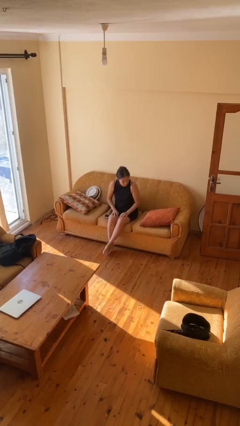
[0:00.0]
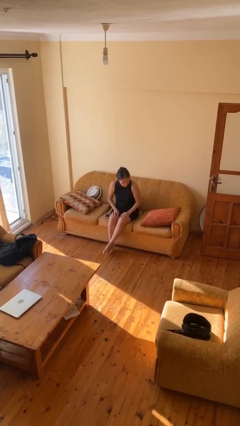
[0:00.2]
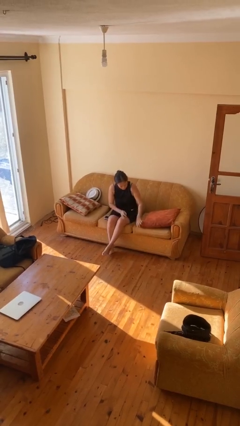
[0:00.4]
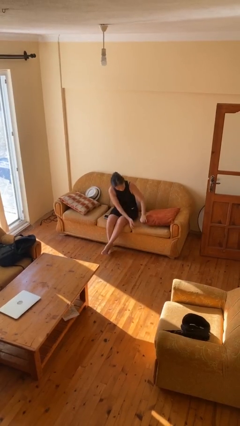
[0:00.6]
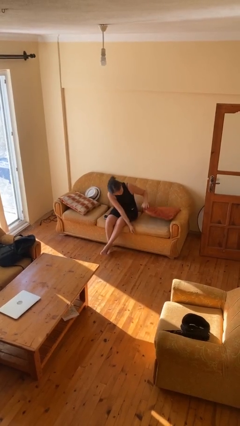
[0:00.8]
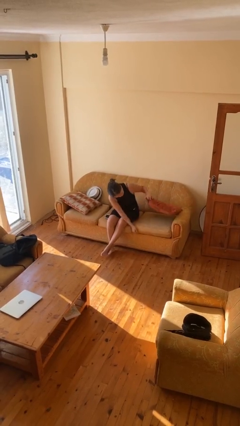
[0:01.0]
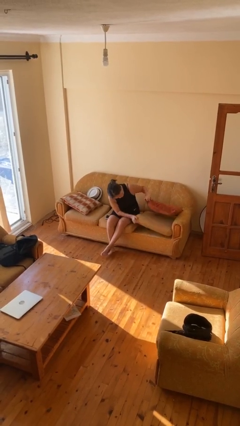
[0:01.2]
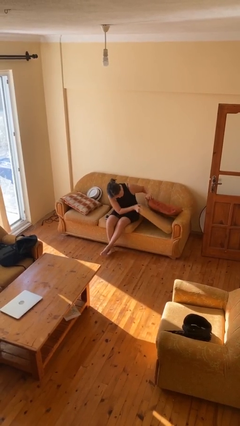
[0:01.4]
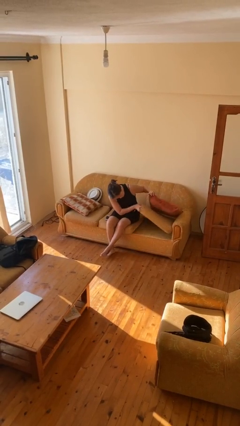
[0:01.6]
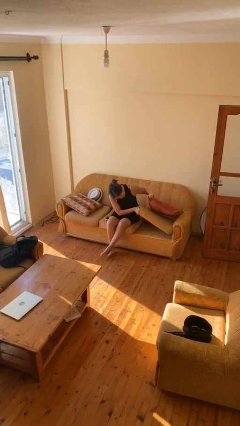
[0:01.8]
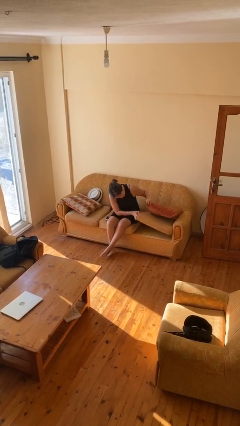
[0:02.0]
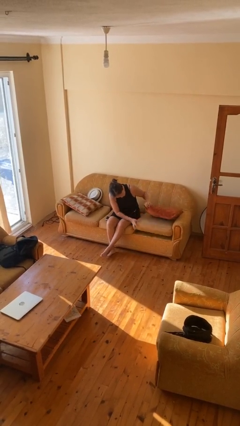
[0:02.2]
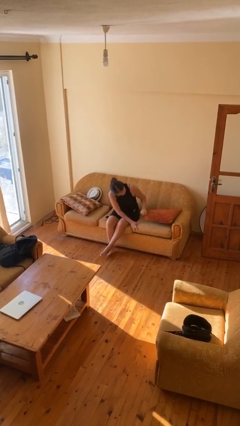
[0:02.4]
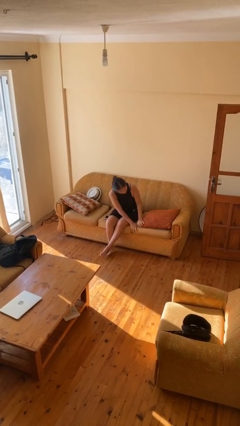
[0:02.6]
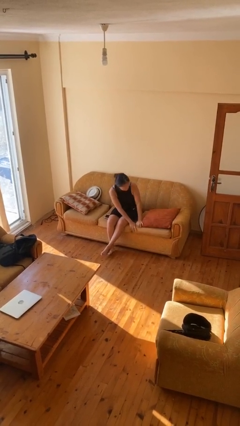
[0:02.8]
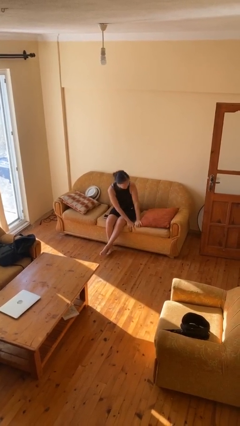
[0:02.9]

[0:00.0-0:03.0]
person searches in couch

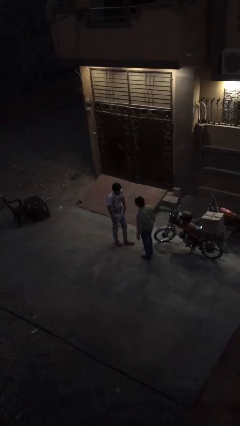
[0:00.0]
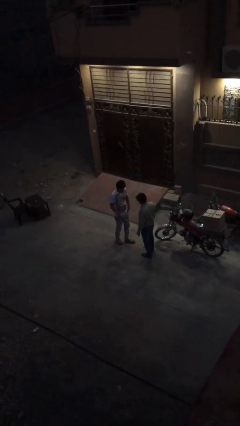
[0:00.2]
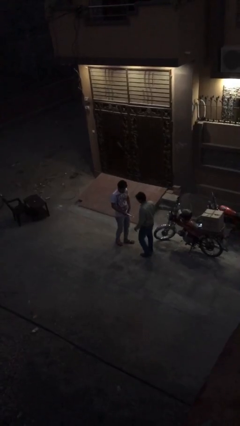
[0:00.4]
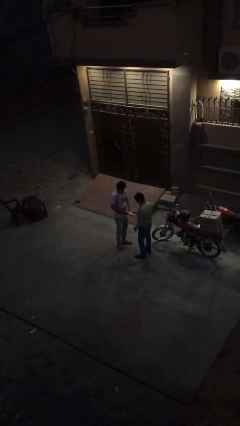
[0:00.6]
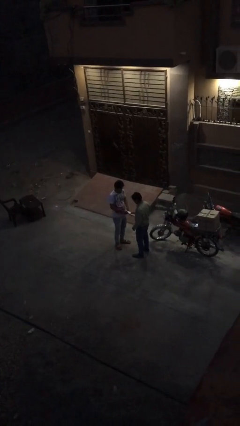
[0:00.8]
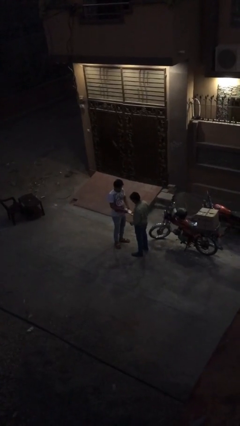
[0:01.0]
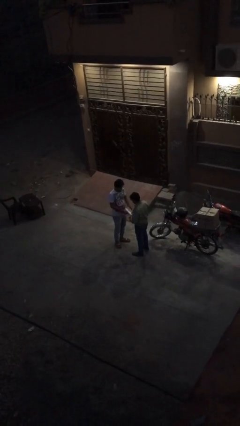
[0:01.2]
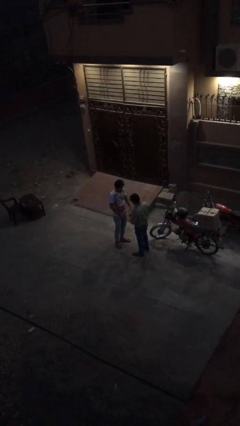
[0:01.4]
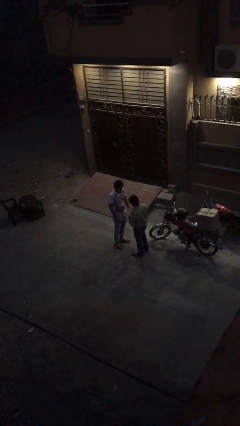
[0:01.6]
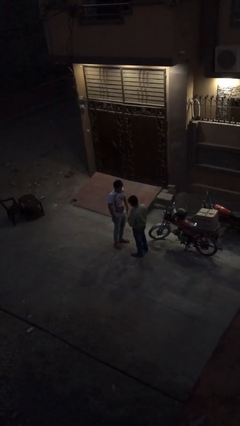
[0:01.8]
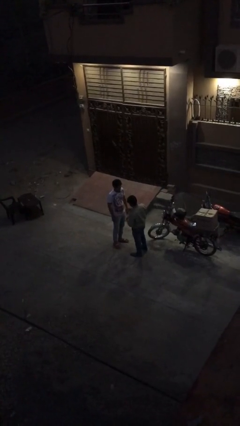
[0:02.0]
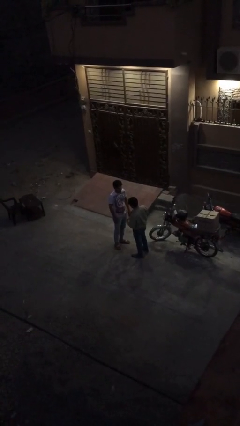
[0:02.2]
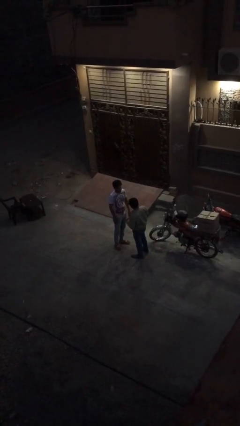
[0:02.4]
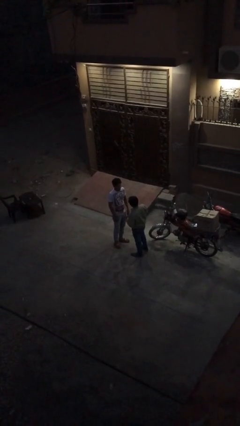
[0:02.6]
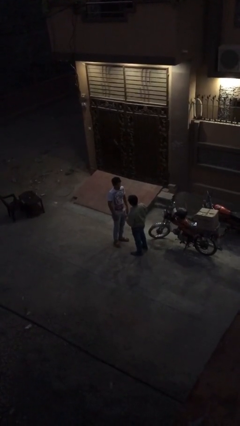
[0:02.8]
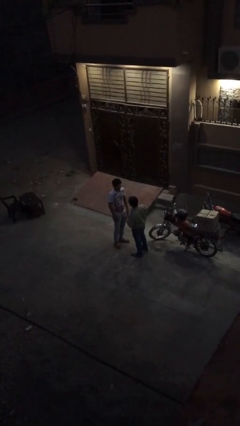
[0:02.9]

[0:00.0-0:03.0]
person transfers object to person

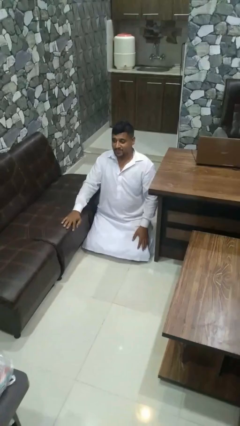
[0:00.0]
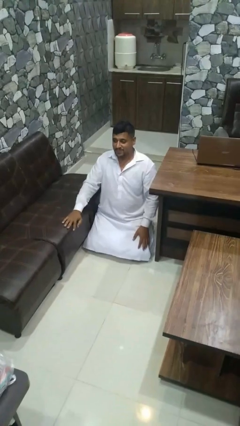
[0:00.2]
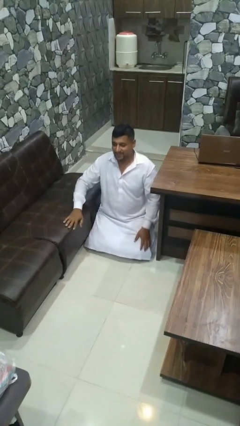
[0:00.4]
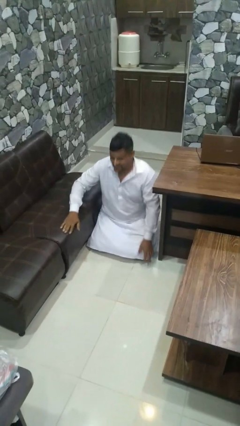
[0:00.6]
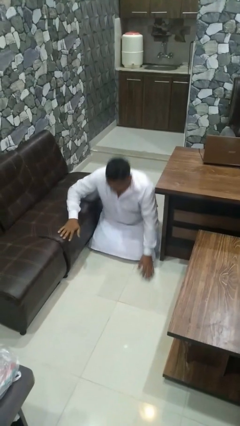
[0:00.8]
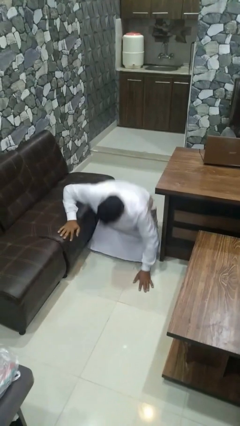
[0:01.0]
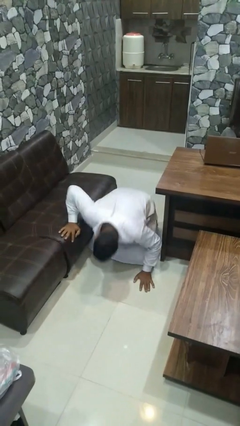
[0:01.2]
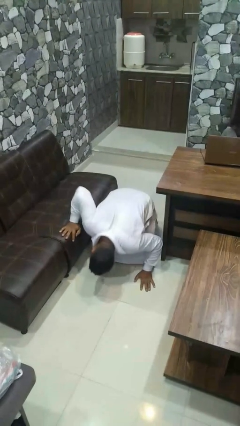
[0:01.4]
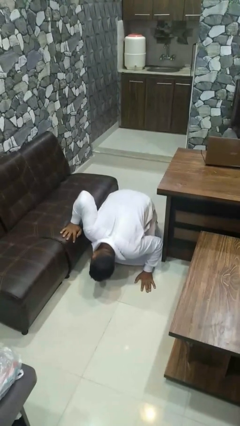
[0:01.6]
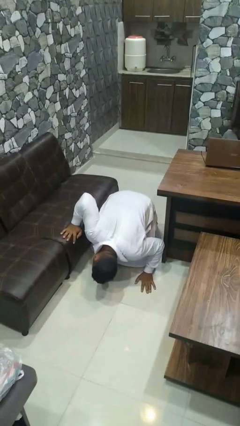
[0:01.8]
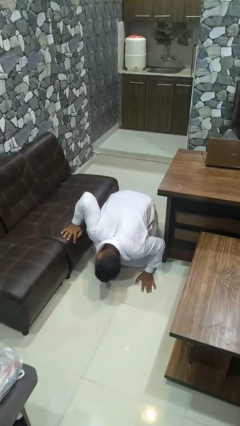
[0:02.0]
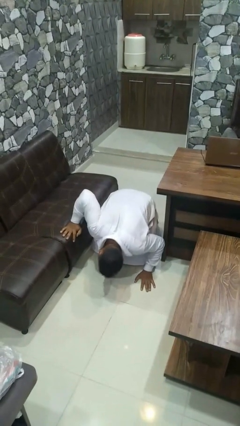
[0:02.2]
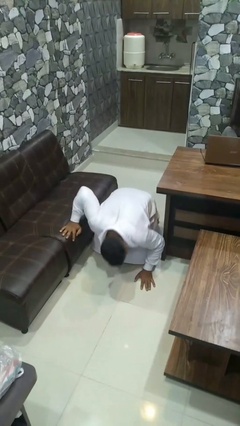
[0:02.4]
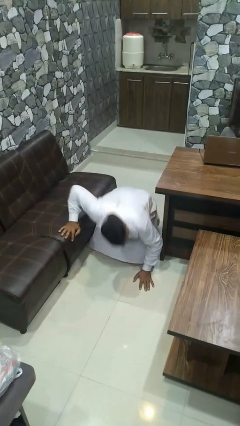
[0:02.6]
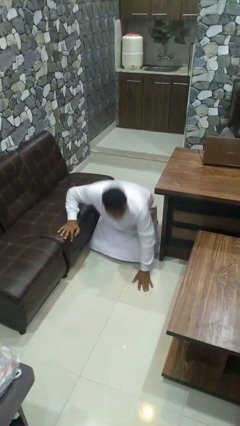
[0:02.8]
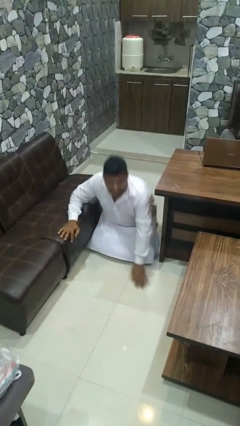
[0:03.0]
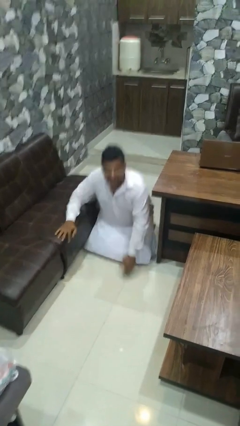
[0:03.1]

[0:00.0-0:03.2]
person searches under couch

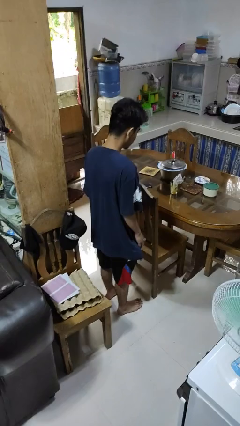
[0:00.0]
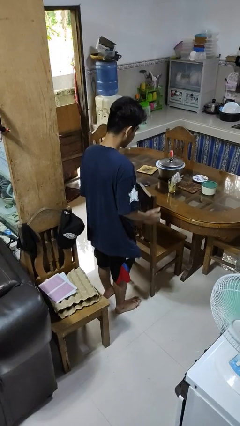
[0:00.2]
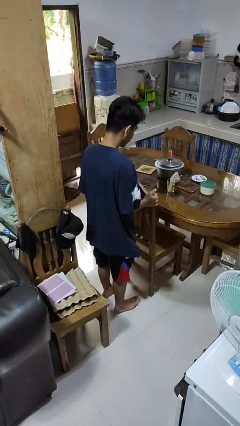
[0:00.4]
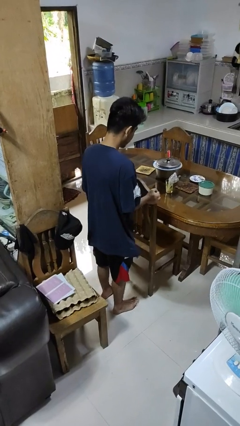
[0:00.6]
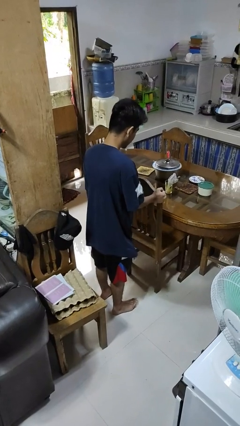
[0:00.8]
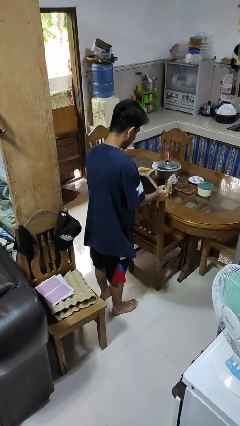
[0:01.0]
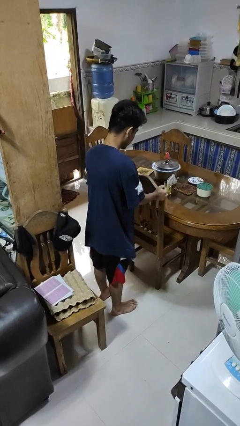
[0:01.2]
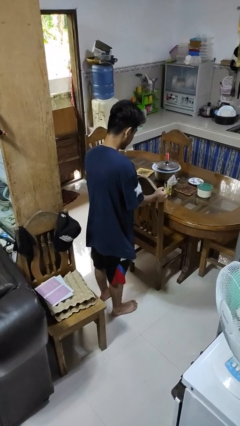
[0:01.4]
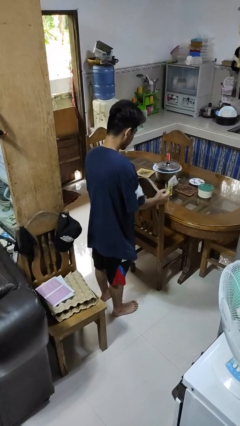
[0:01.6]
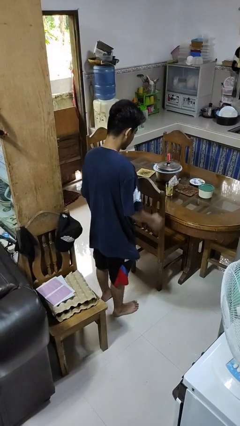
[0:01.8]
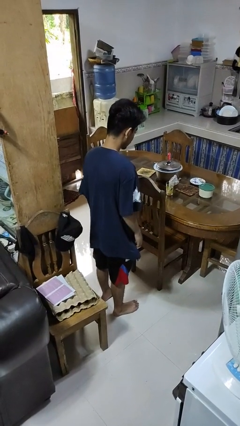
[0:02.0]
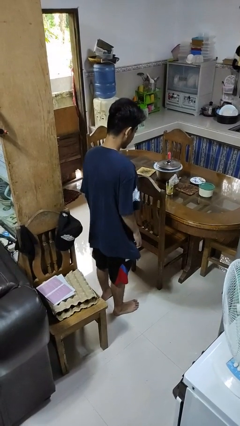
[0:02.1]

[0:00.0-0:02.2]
person pushes in chair

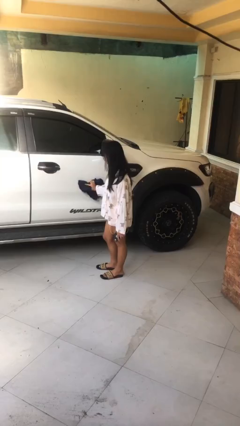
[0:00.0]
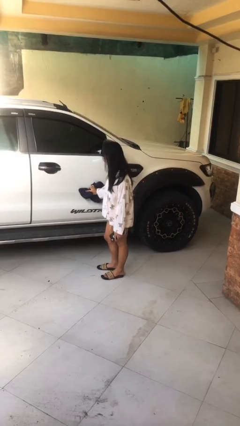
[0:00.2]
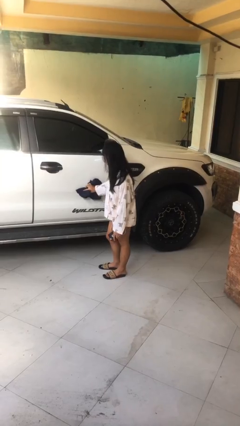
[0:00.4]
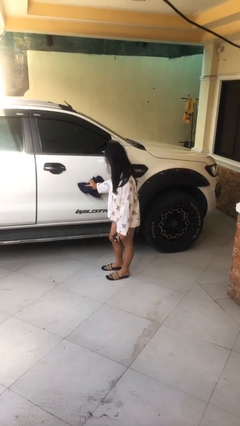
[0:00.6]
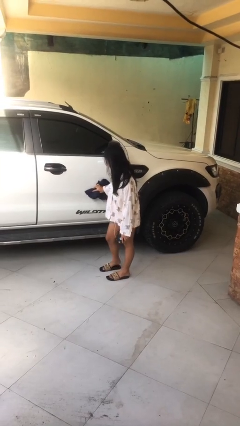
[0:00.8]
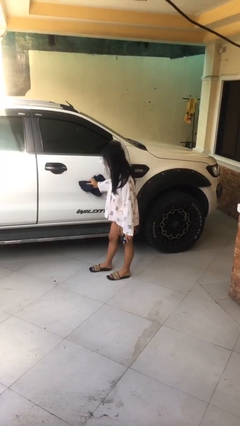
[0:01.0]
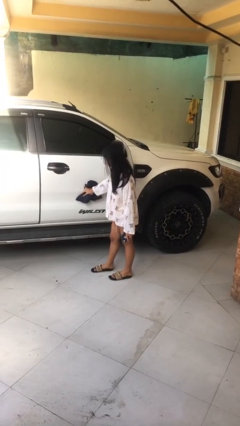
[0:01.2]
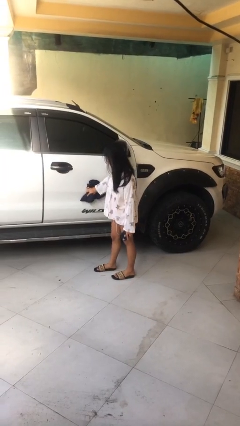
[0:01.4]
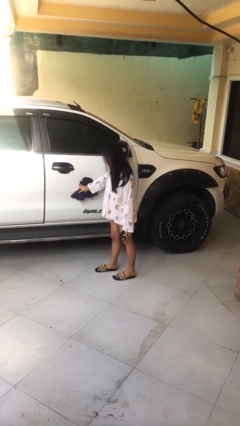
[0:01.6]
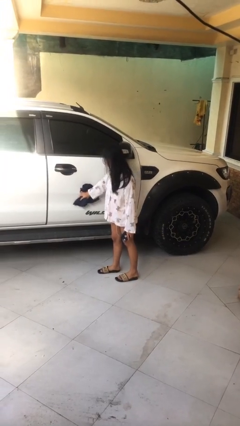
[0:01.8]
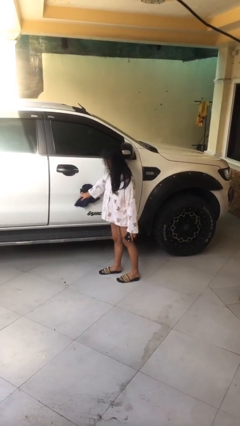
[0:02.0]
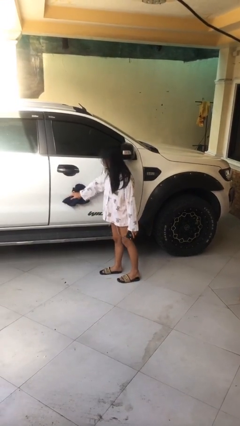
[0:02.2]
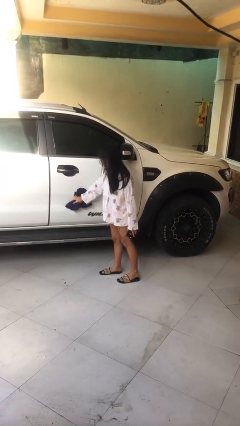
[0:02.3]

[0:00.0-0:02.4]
person polishes car with rag

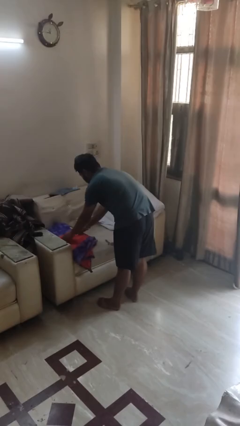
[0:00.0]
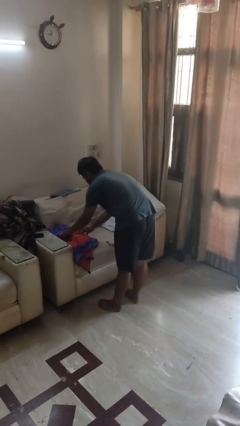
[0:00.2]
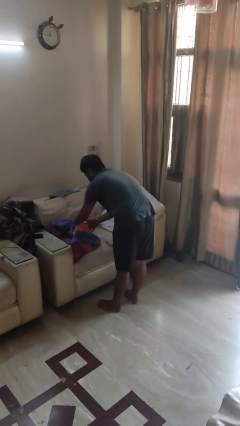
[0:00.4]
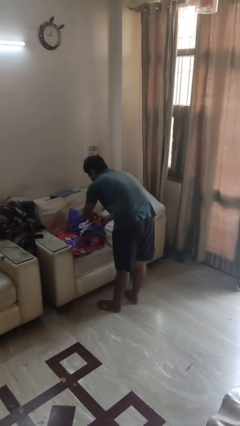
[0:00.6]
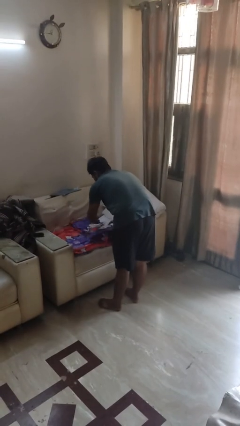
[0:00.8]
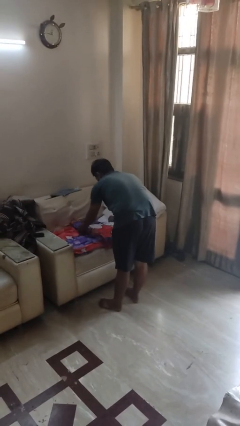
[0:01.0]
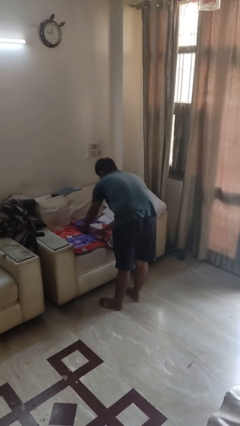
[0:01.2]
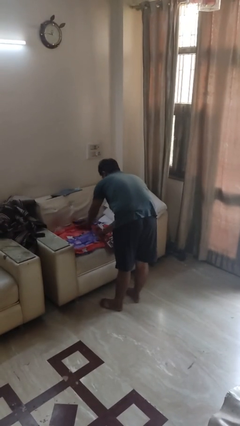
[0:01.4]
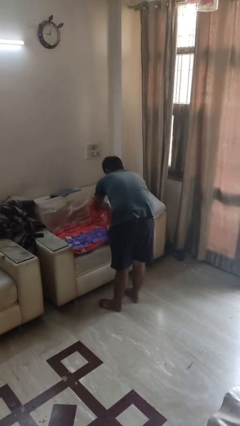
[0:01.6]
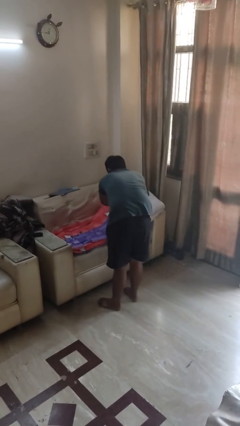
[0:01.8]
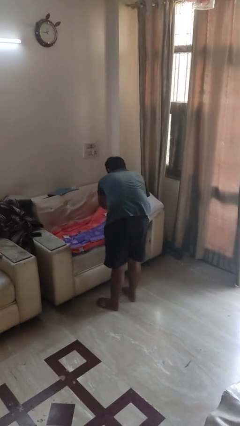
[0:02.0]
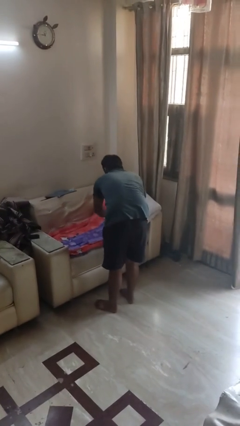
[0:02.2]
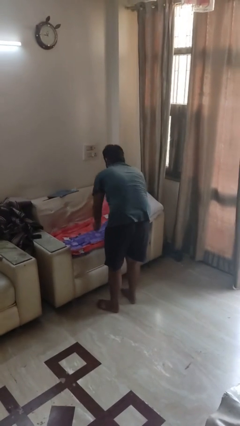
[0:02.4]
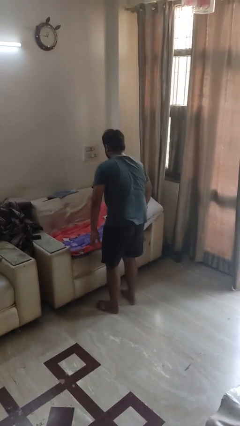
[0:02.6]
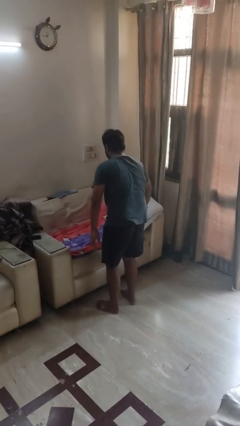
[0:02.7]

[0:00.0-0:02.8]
person unfolds blanket

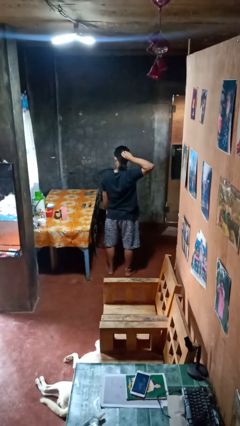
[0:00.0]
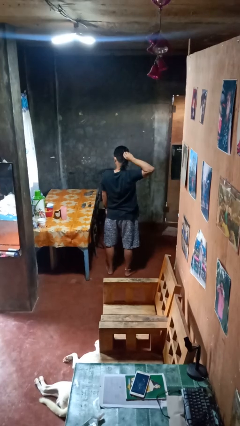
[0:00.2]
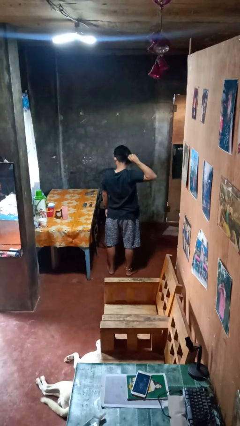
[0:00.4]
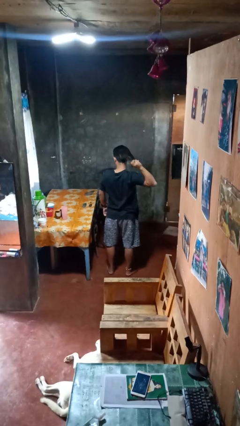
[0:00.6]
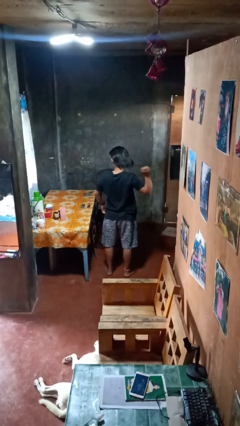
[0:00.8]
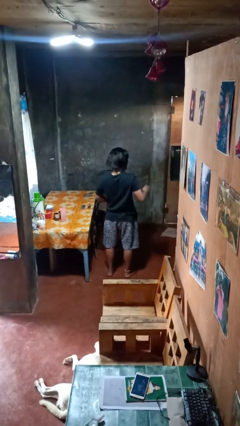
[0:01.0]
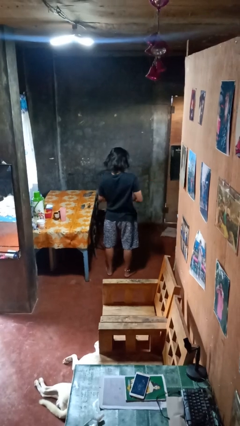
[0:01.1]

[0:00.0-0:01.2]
person takes off hairtie
